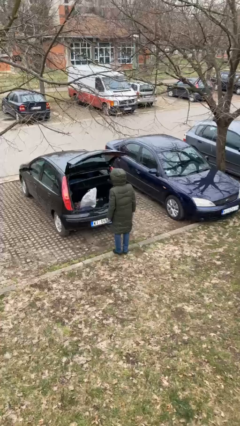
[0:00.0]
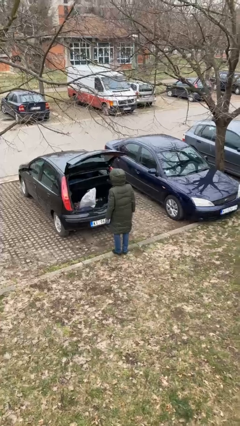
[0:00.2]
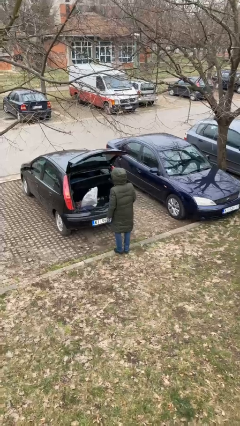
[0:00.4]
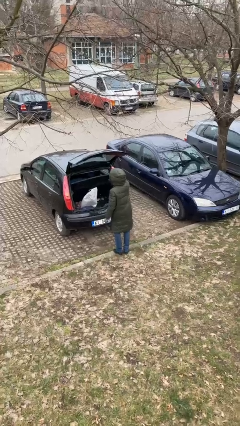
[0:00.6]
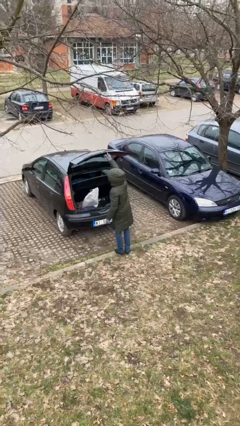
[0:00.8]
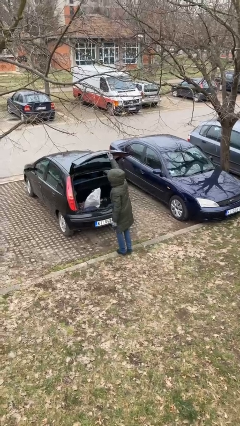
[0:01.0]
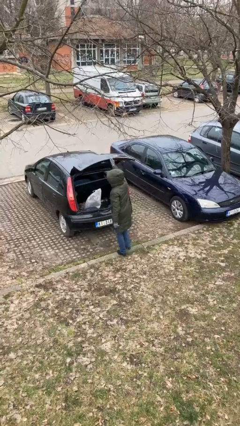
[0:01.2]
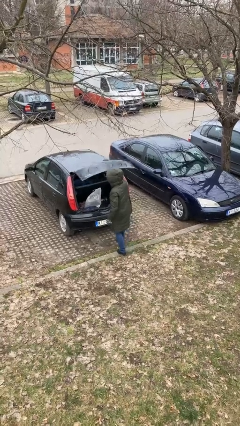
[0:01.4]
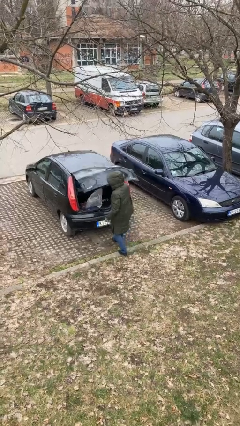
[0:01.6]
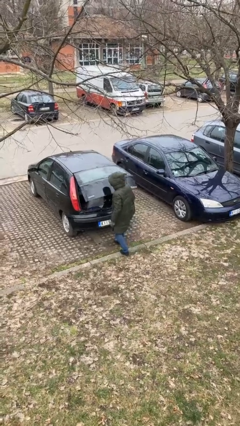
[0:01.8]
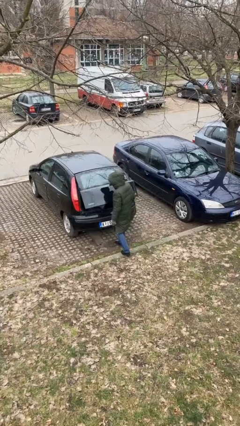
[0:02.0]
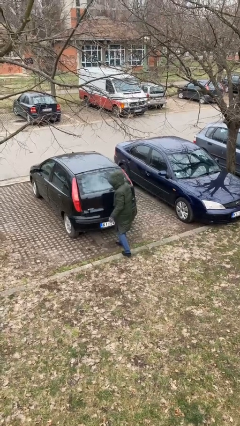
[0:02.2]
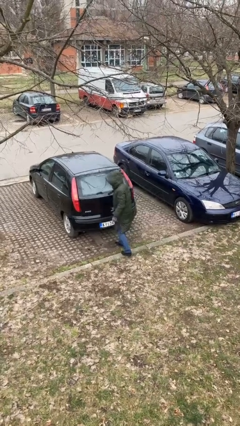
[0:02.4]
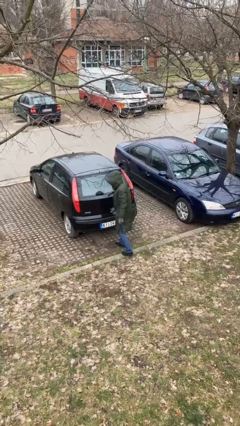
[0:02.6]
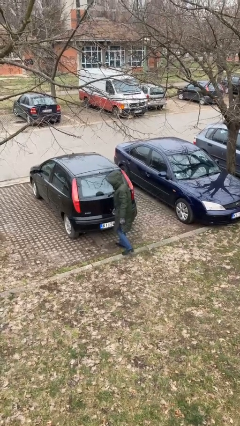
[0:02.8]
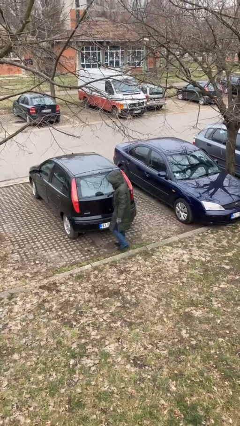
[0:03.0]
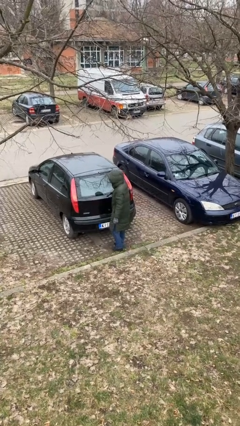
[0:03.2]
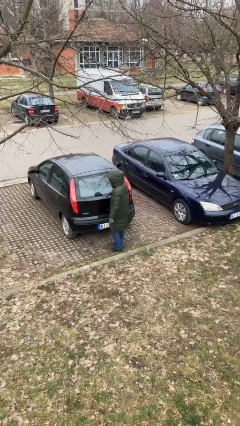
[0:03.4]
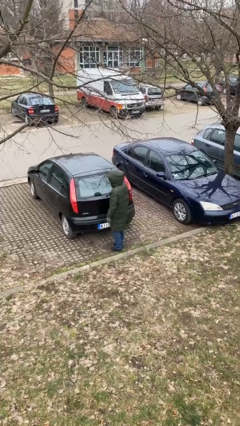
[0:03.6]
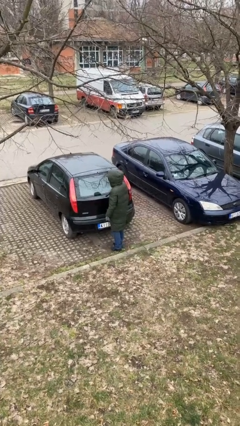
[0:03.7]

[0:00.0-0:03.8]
person closes car trunk

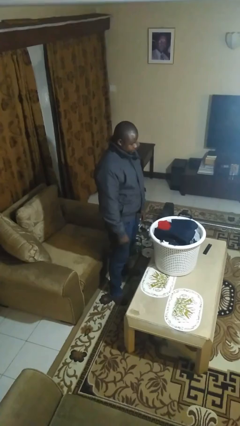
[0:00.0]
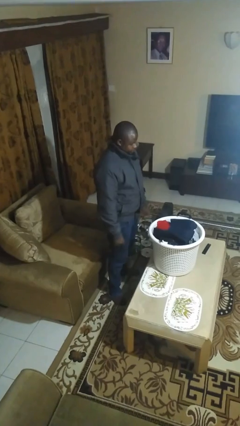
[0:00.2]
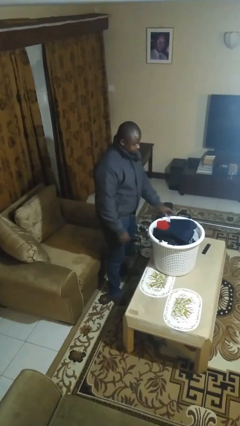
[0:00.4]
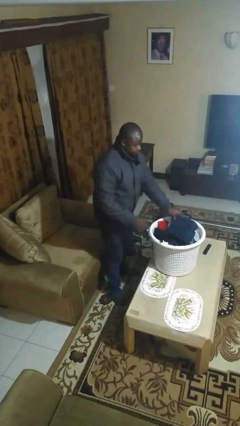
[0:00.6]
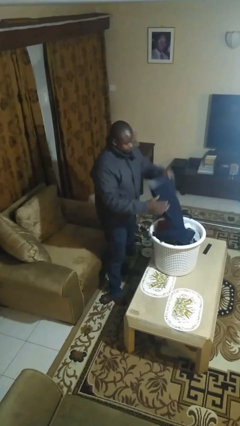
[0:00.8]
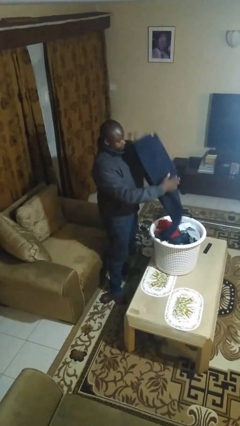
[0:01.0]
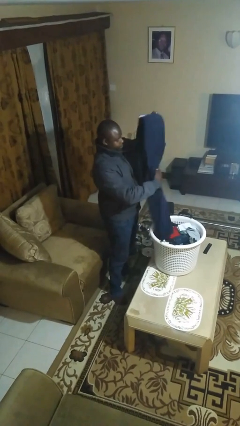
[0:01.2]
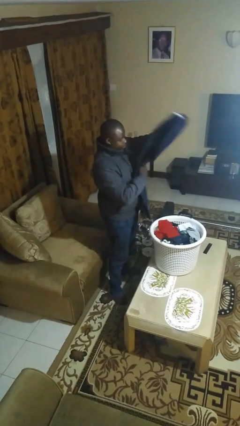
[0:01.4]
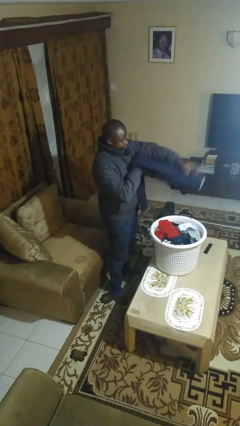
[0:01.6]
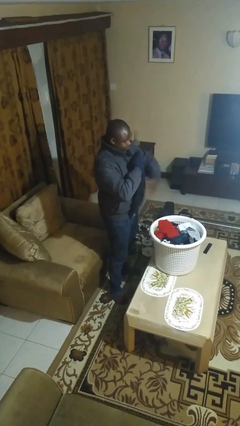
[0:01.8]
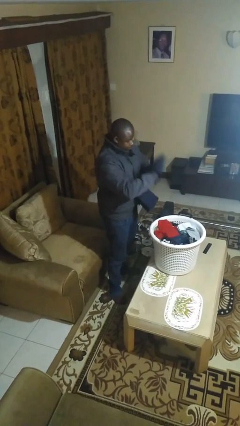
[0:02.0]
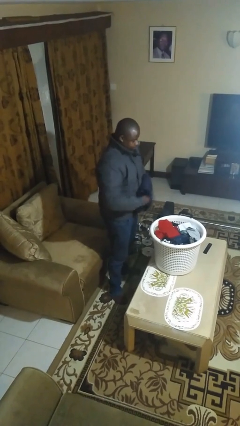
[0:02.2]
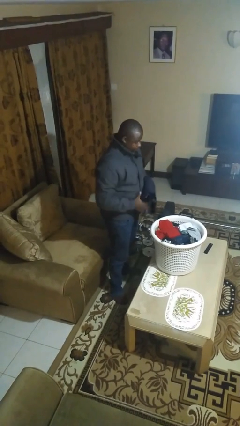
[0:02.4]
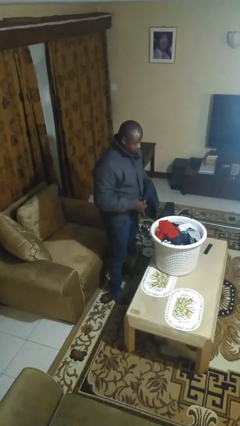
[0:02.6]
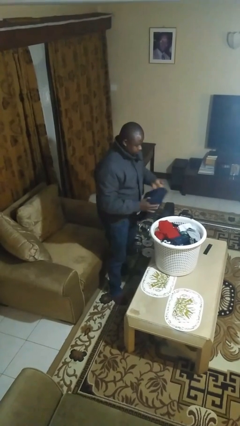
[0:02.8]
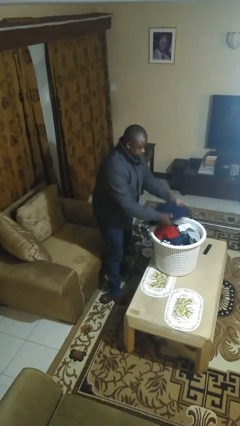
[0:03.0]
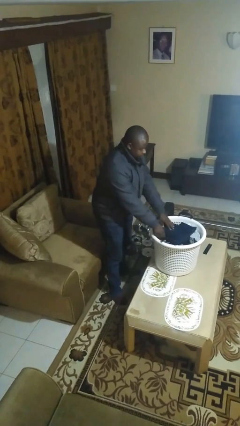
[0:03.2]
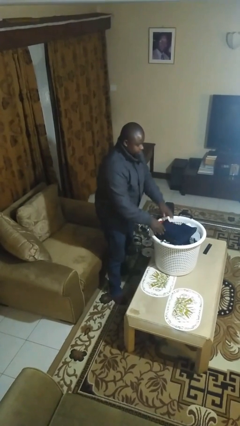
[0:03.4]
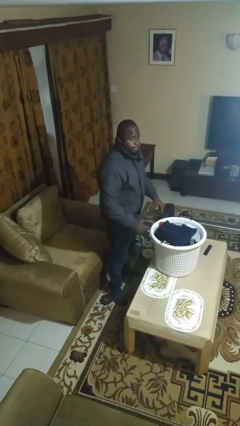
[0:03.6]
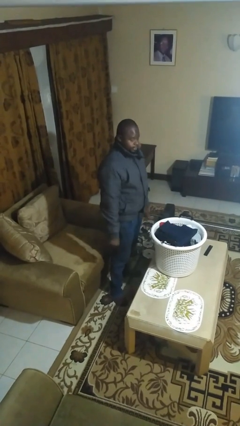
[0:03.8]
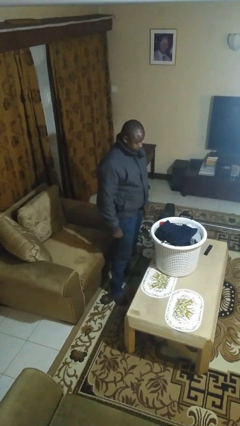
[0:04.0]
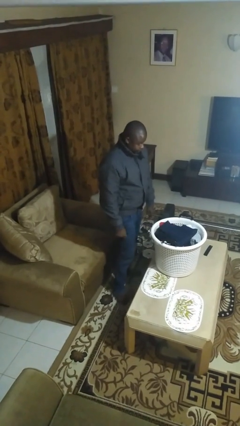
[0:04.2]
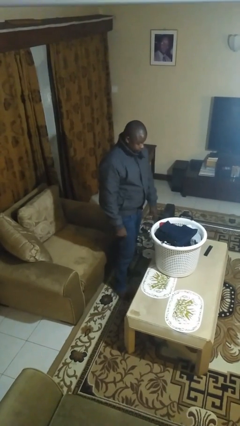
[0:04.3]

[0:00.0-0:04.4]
person folds pants

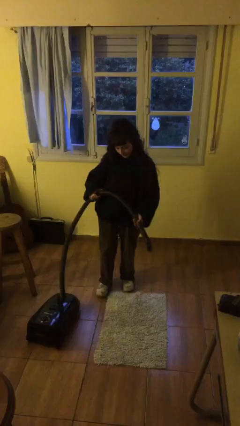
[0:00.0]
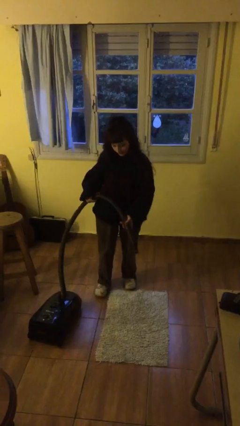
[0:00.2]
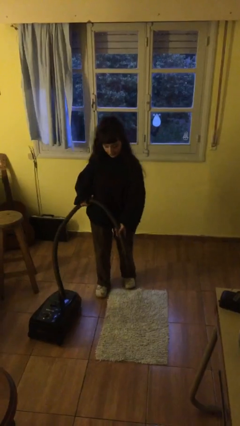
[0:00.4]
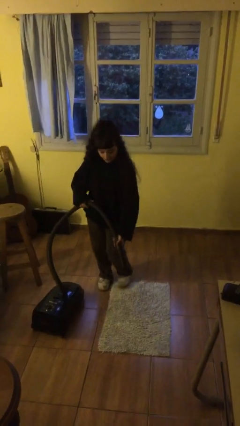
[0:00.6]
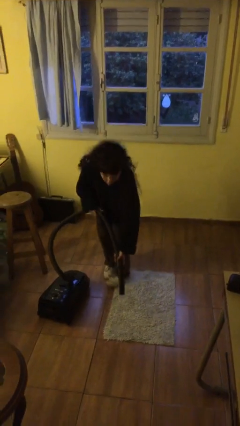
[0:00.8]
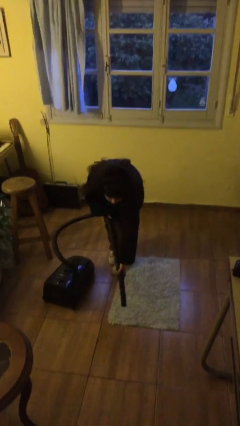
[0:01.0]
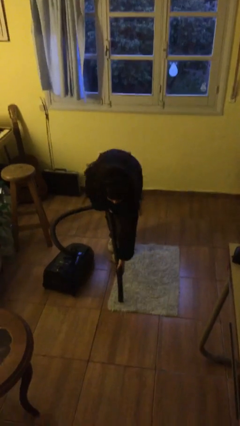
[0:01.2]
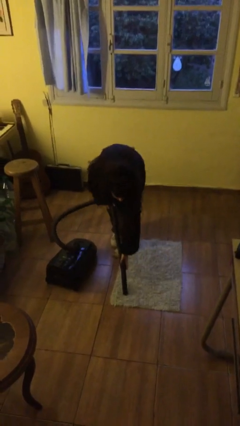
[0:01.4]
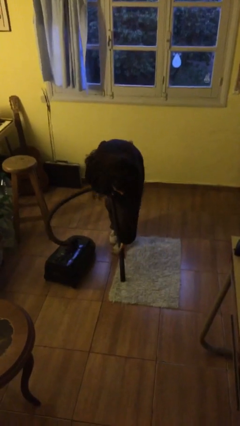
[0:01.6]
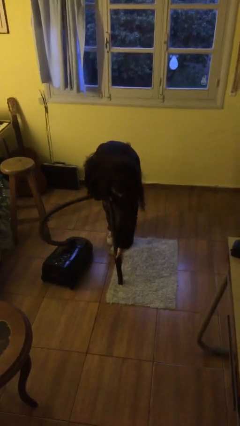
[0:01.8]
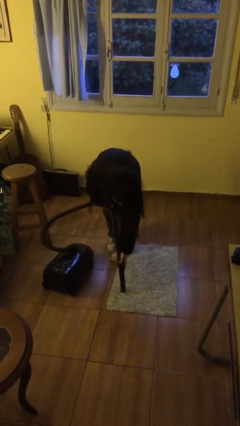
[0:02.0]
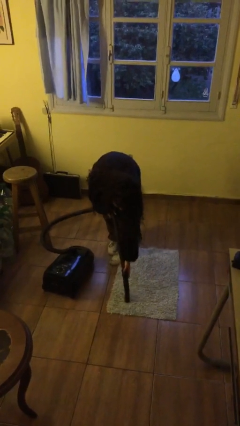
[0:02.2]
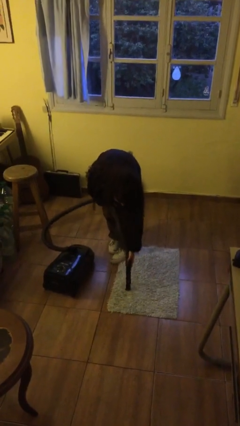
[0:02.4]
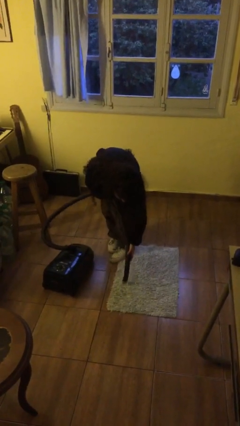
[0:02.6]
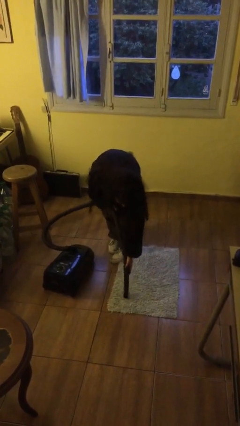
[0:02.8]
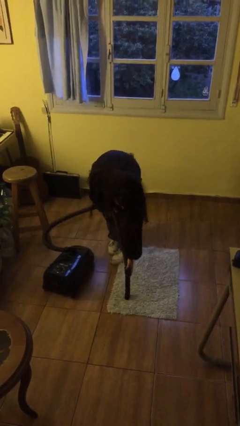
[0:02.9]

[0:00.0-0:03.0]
person vacuums carpet

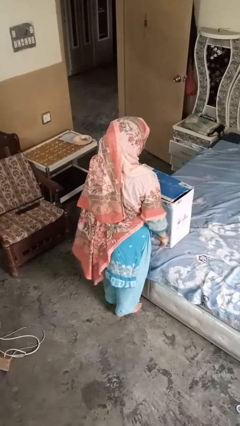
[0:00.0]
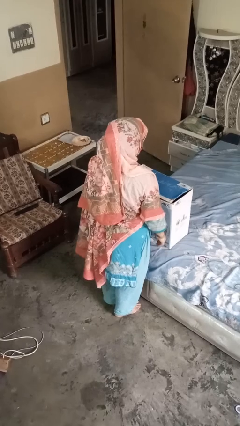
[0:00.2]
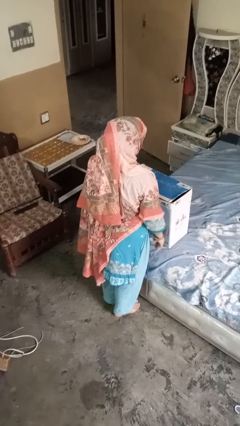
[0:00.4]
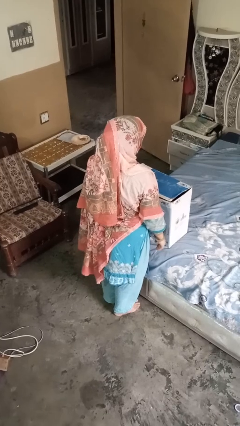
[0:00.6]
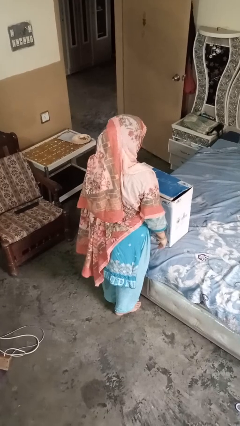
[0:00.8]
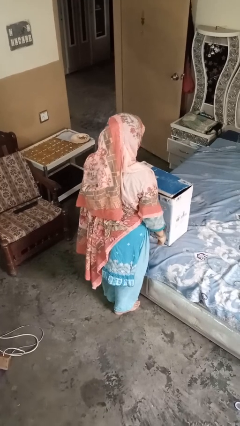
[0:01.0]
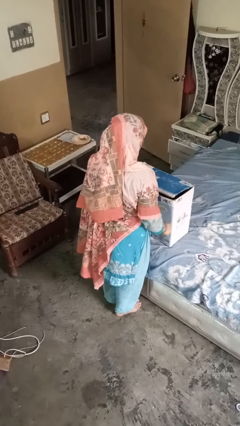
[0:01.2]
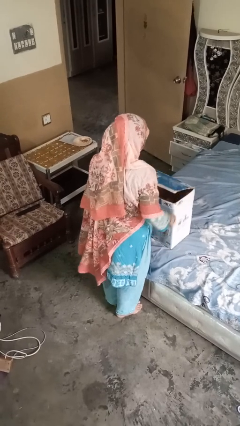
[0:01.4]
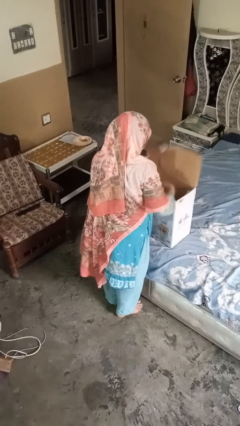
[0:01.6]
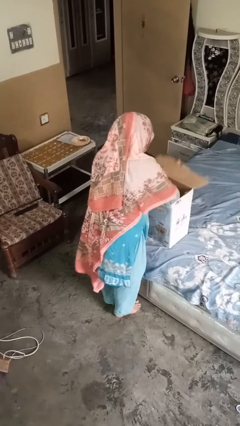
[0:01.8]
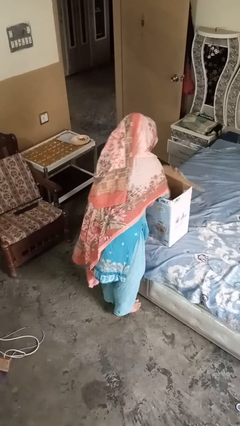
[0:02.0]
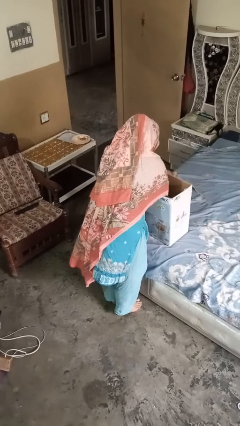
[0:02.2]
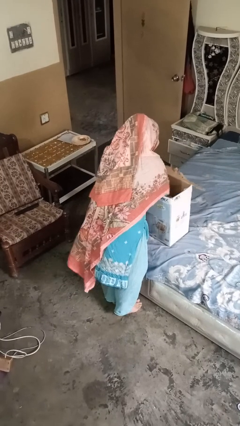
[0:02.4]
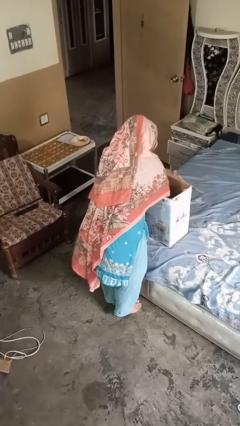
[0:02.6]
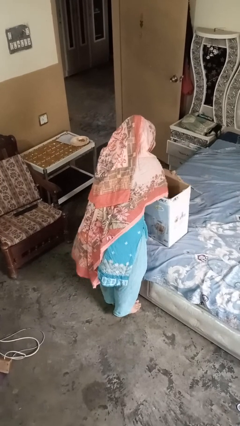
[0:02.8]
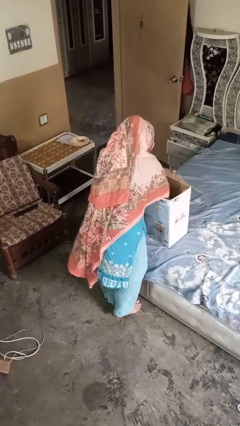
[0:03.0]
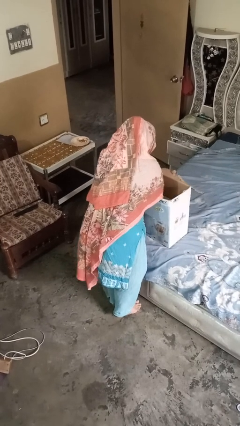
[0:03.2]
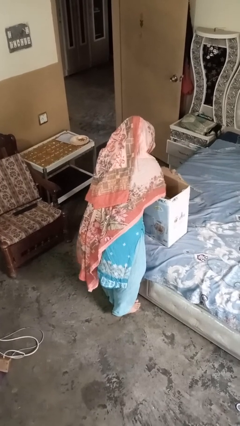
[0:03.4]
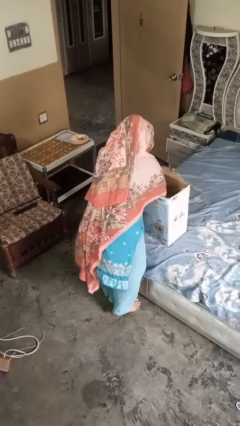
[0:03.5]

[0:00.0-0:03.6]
person searches in box

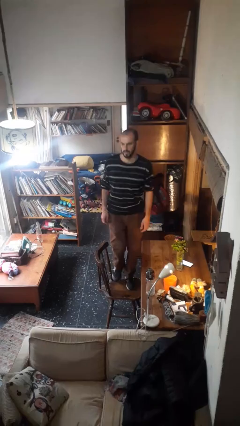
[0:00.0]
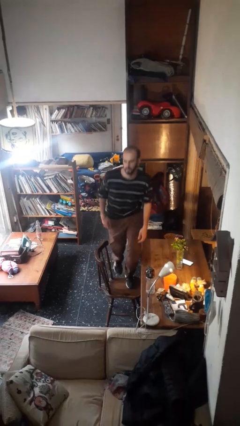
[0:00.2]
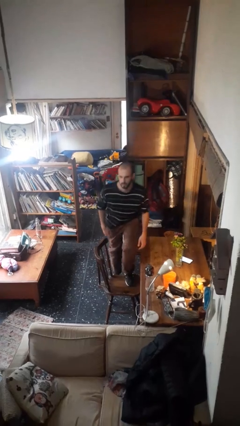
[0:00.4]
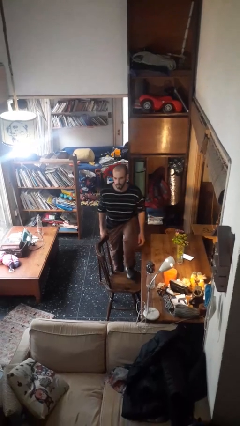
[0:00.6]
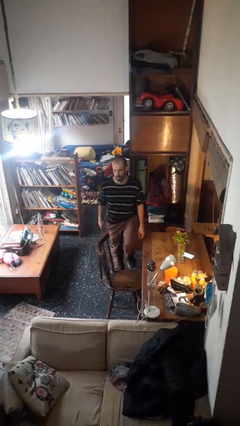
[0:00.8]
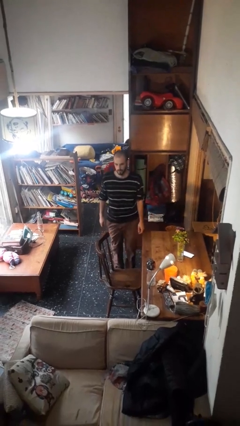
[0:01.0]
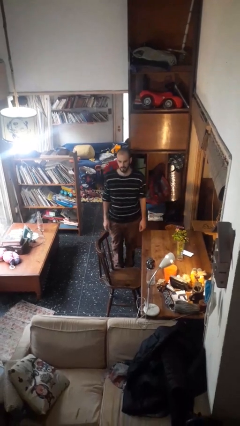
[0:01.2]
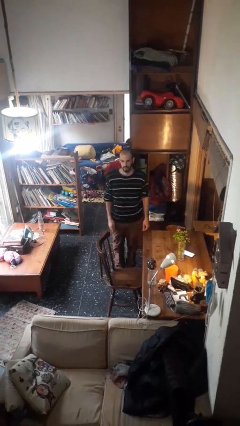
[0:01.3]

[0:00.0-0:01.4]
person climbs off chair

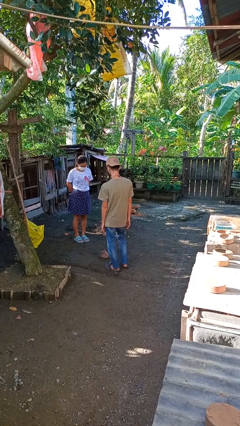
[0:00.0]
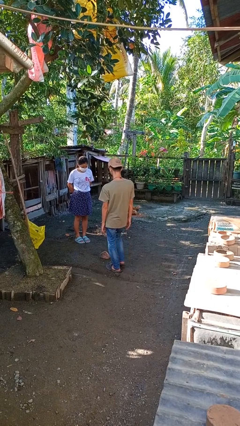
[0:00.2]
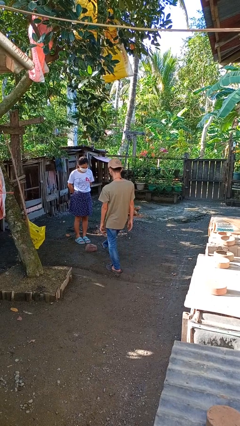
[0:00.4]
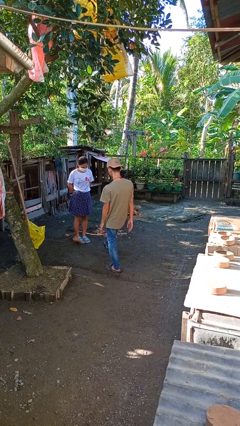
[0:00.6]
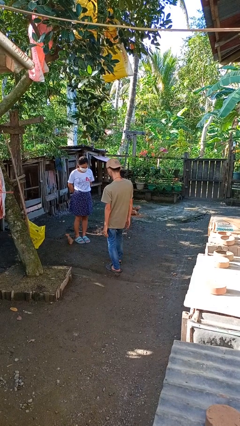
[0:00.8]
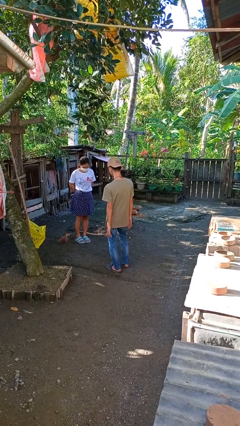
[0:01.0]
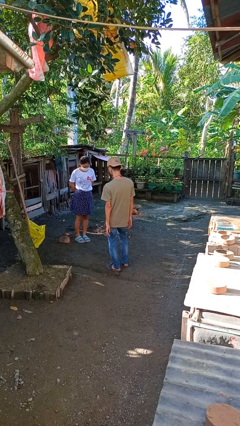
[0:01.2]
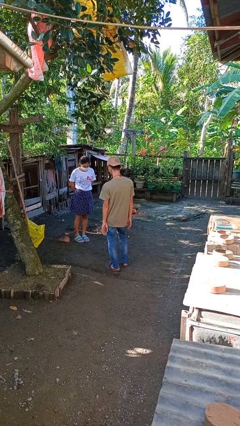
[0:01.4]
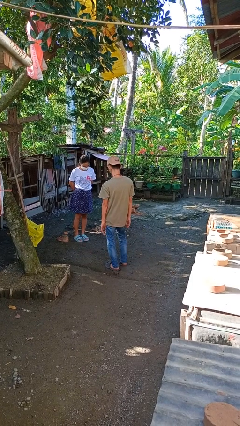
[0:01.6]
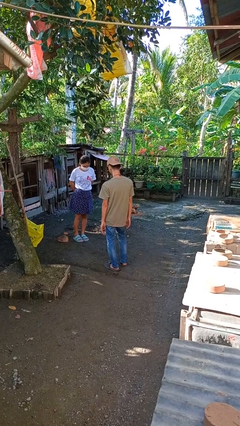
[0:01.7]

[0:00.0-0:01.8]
person kicks object to person
